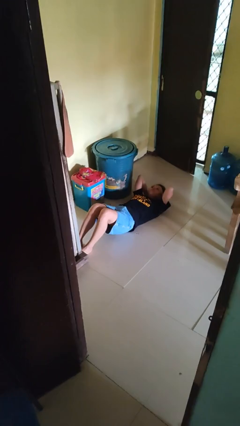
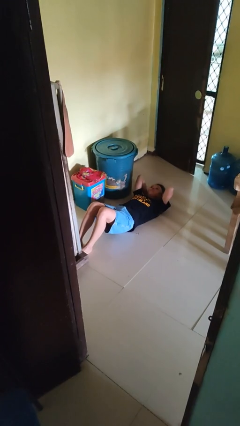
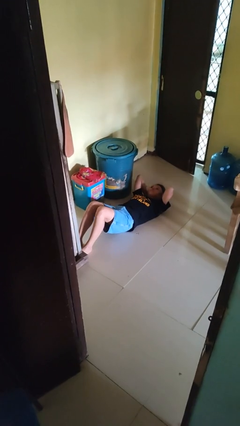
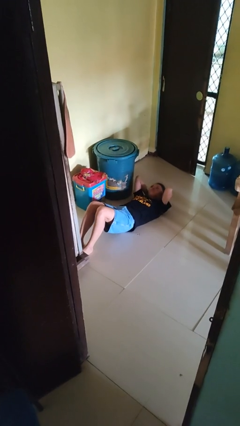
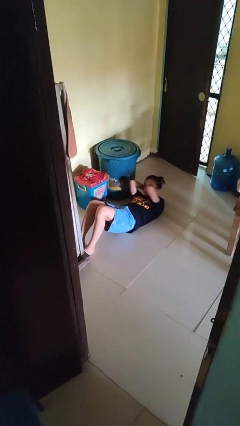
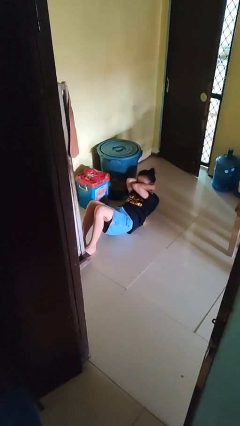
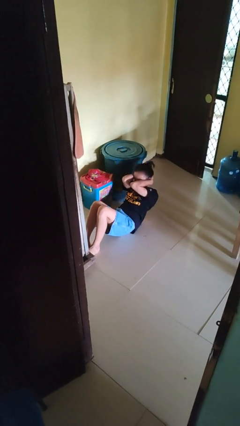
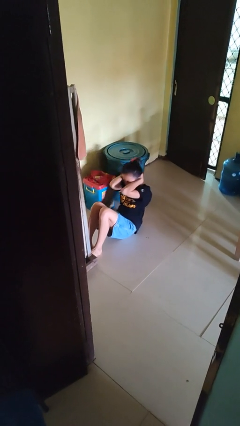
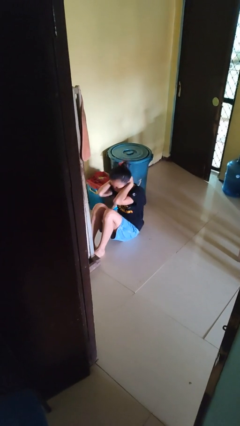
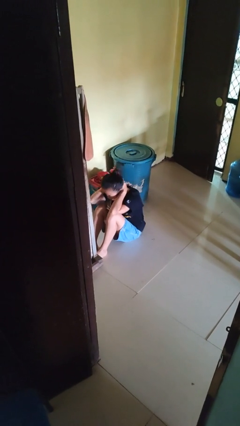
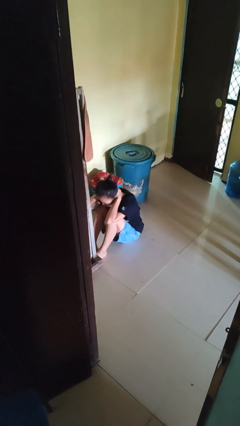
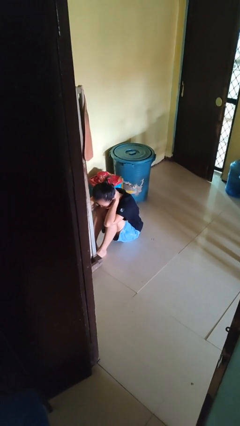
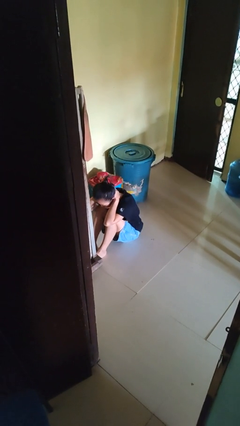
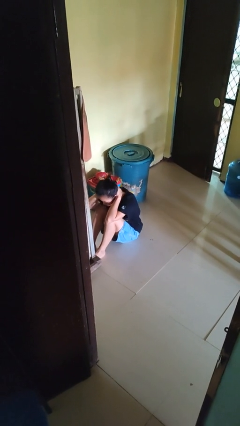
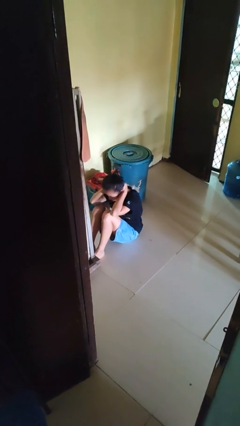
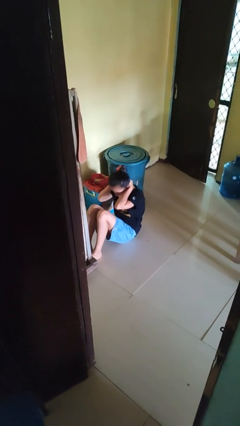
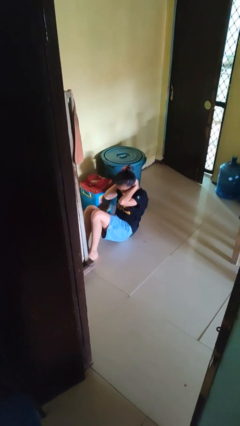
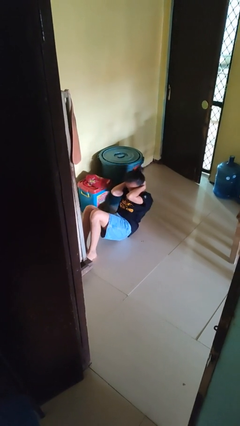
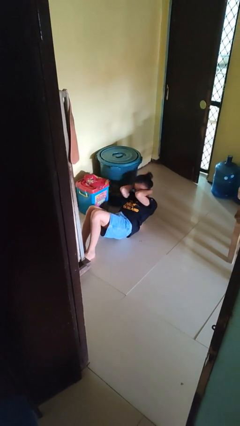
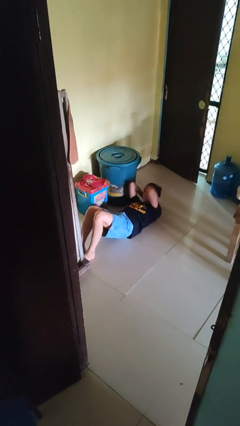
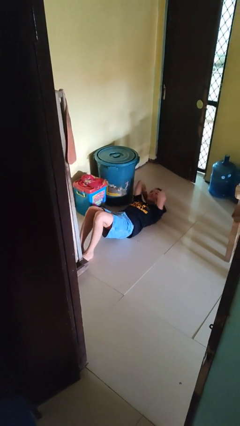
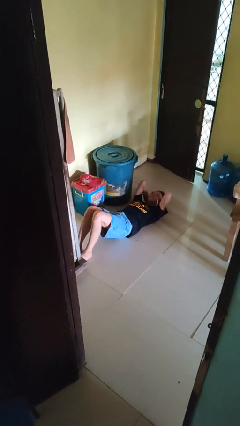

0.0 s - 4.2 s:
person exercises with situp

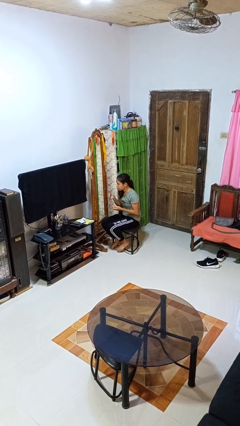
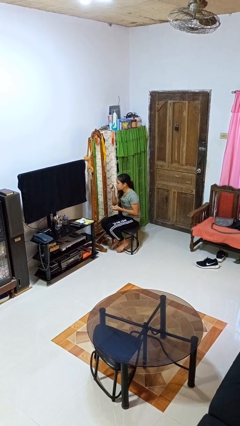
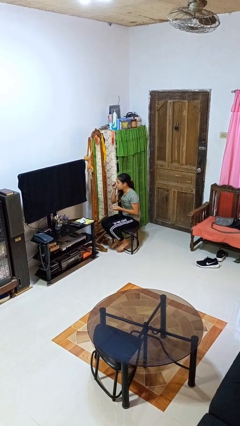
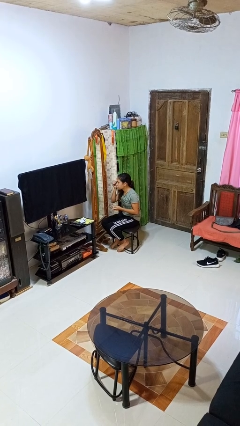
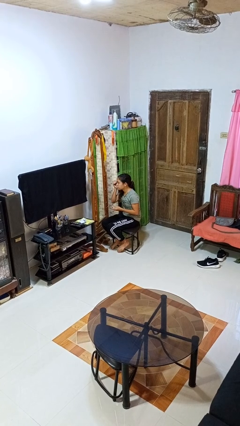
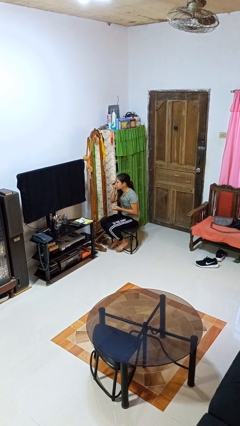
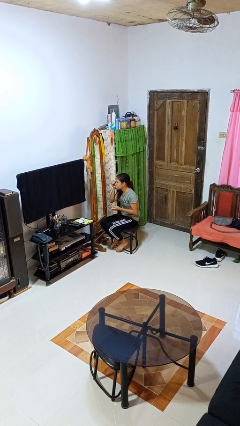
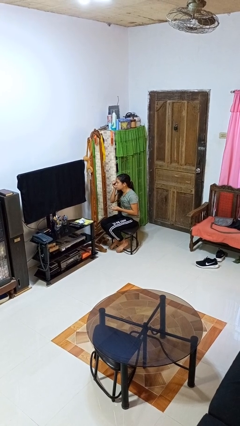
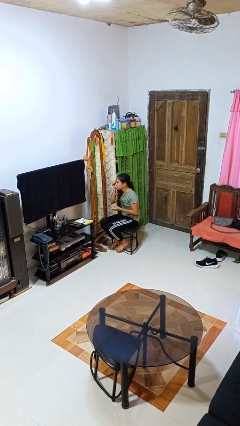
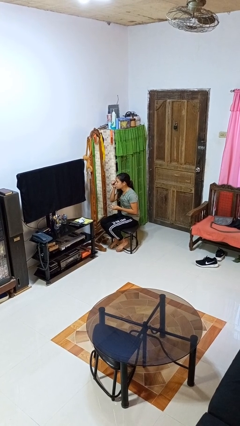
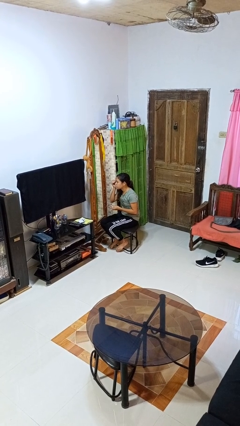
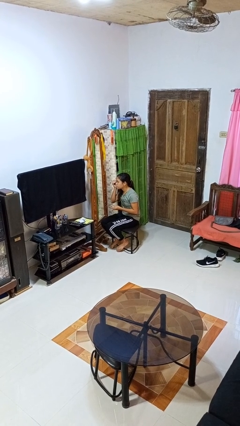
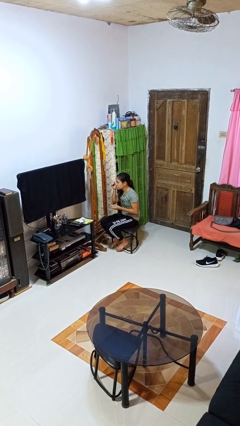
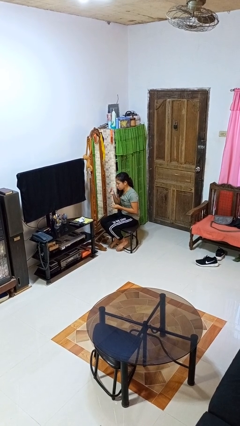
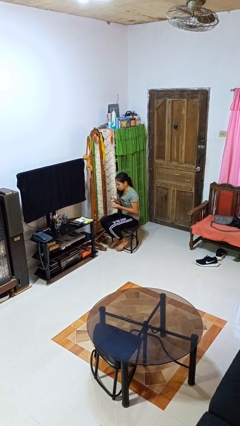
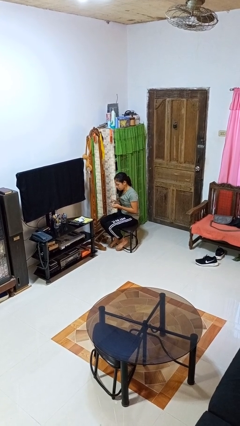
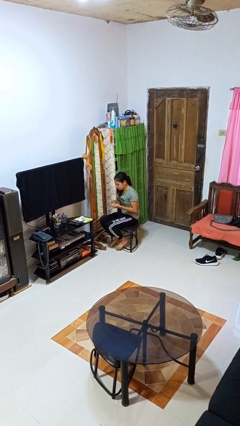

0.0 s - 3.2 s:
person applies eye makeup

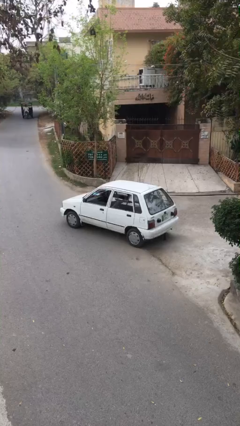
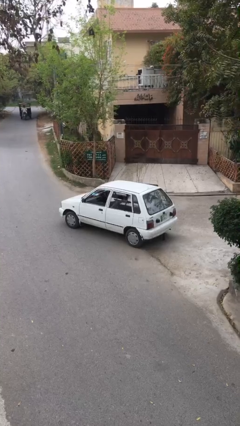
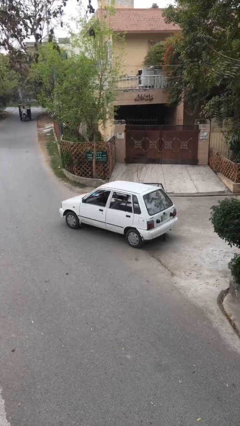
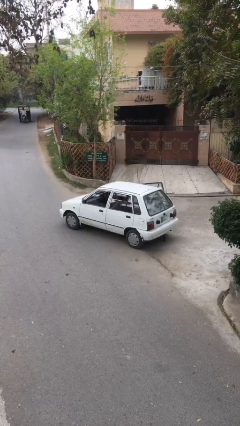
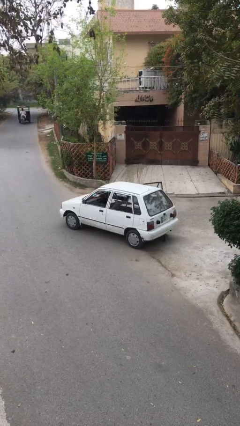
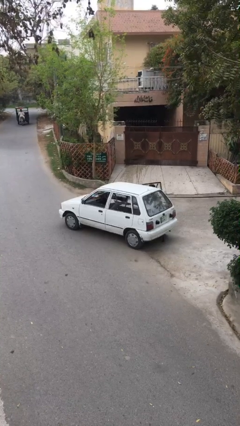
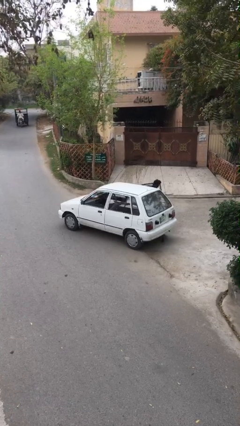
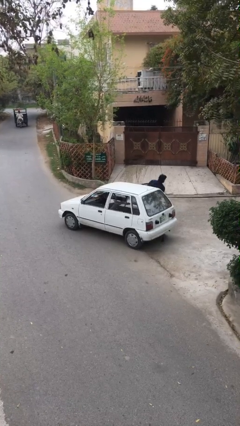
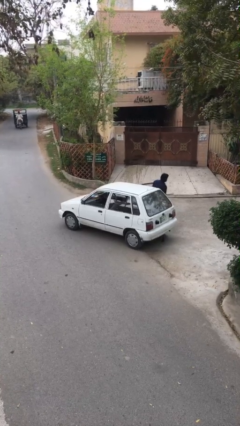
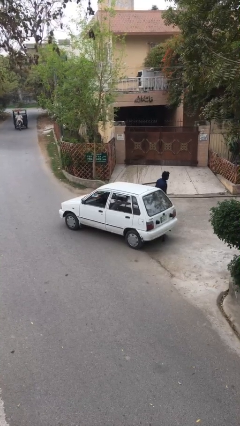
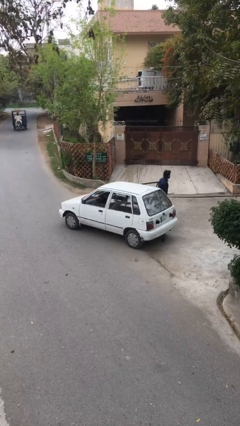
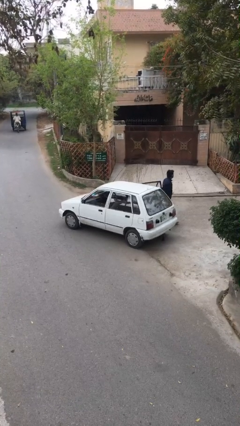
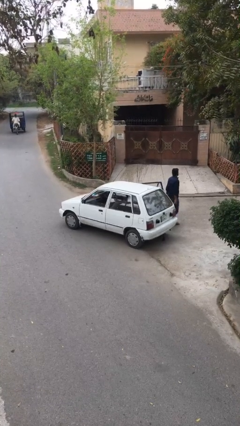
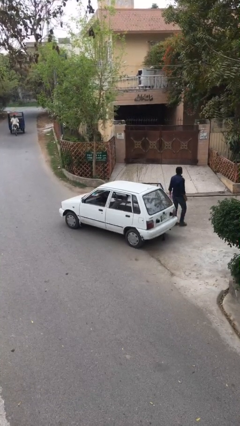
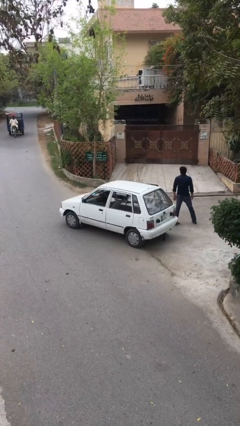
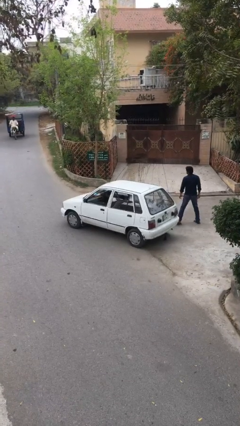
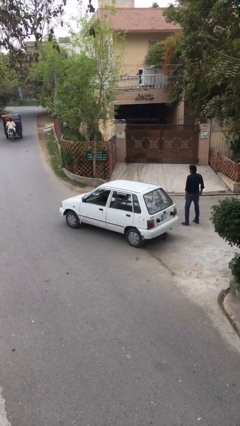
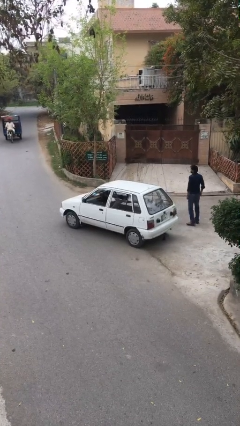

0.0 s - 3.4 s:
car drops off person

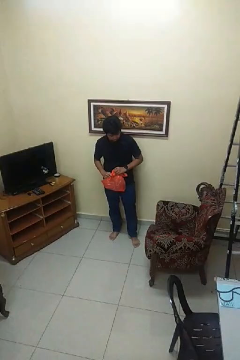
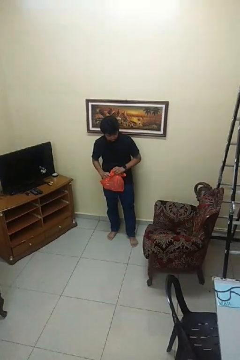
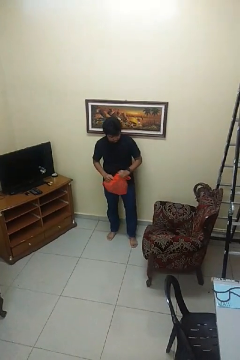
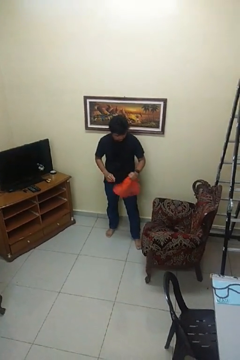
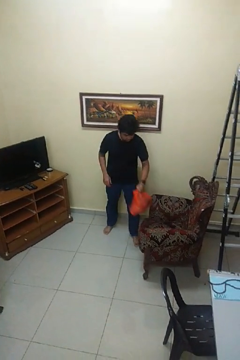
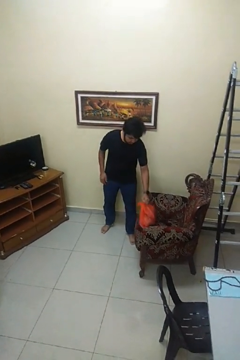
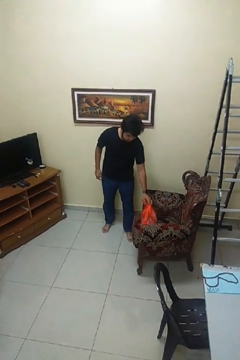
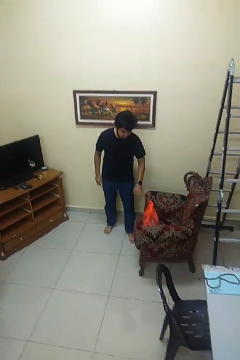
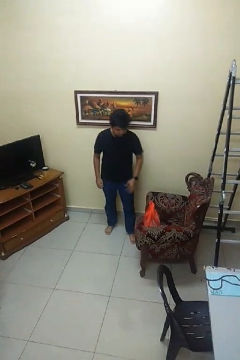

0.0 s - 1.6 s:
person puts down object on couch

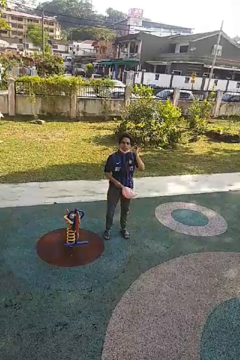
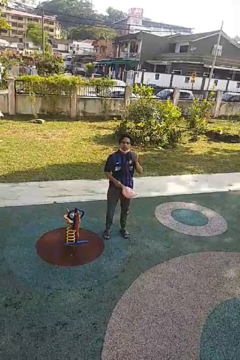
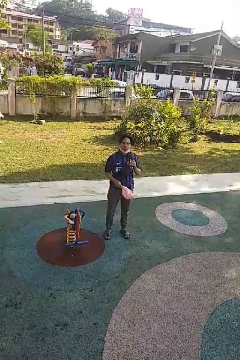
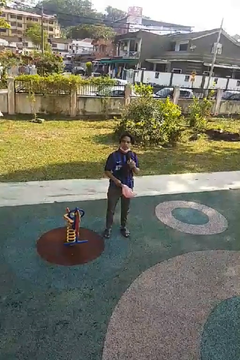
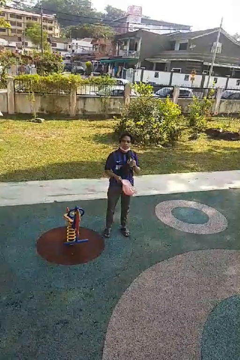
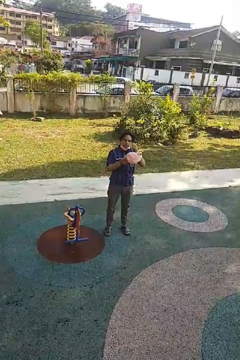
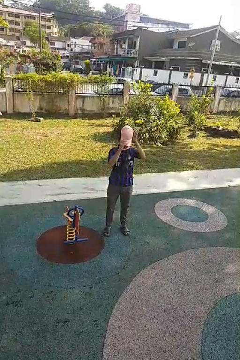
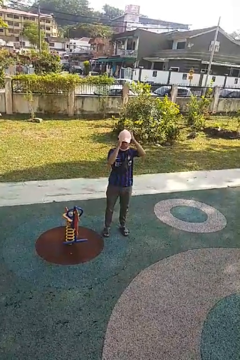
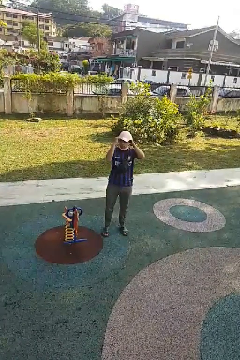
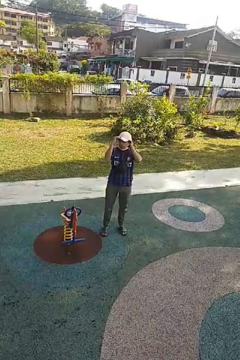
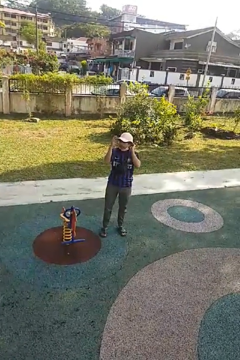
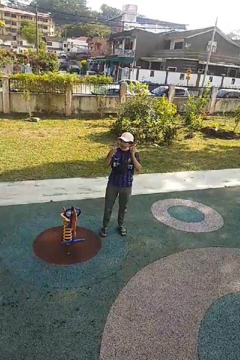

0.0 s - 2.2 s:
person puts on hat

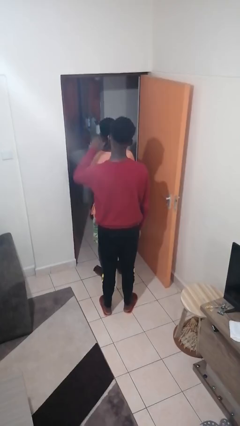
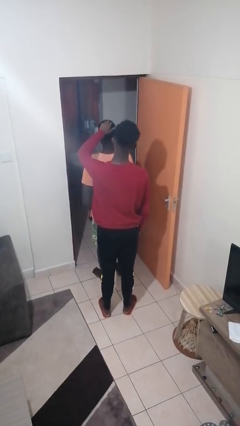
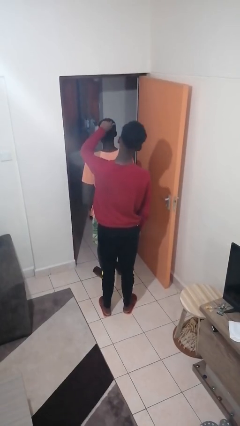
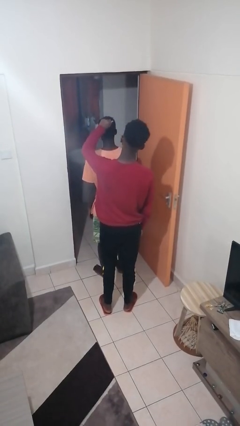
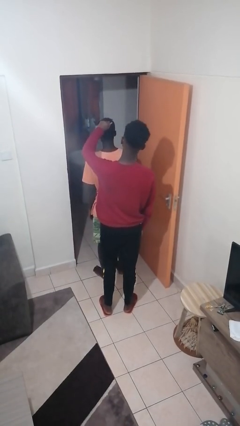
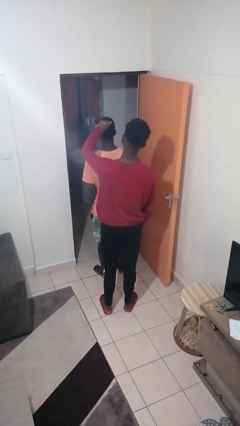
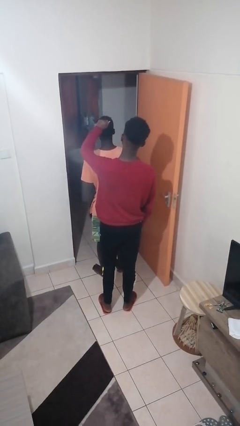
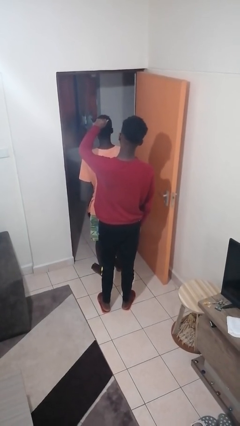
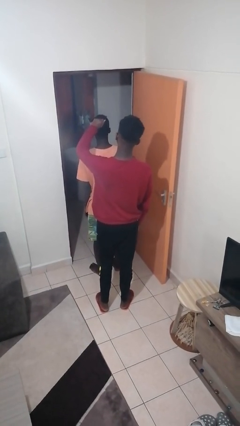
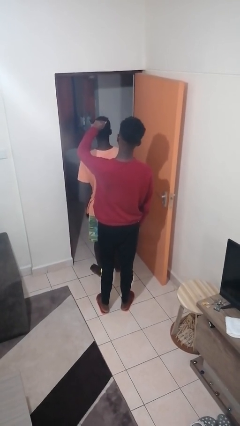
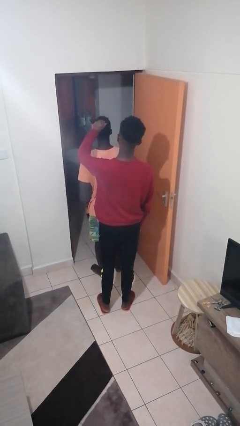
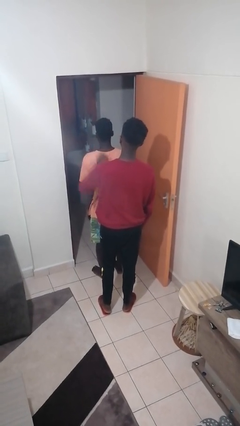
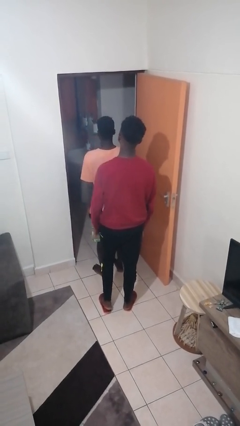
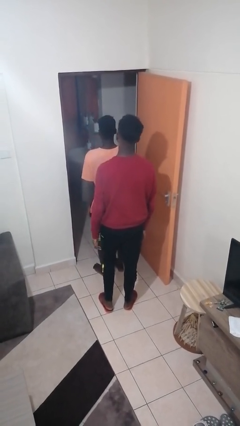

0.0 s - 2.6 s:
person grabs person by hair

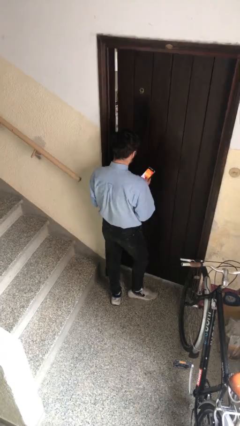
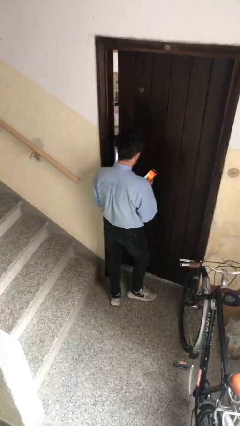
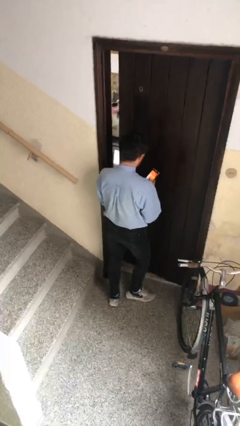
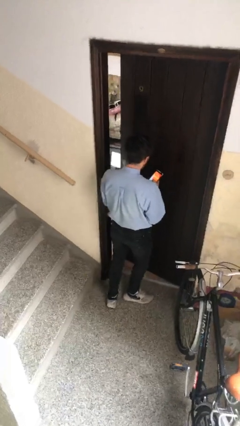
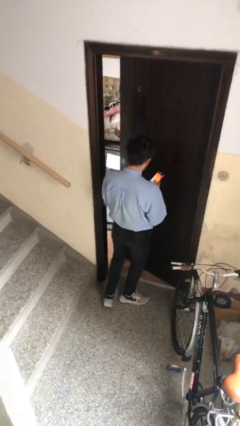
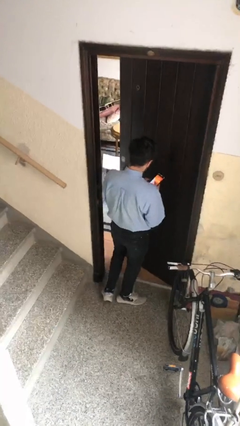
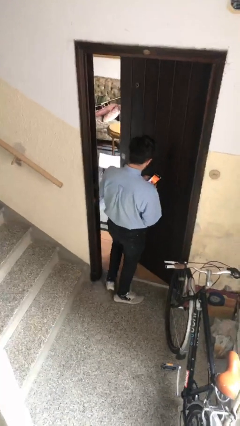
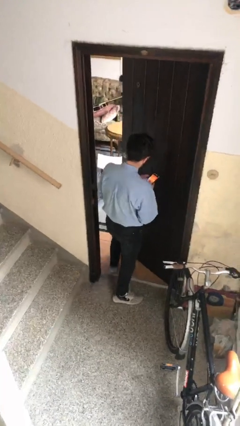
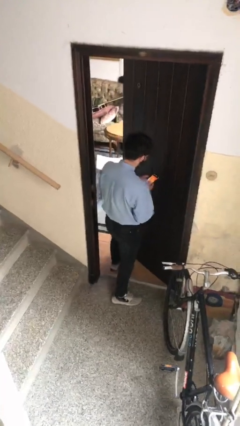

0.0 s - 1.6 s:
person opens facility door
